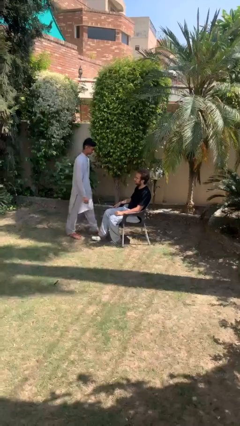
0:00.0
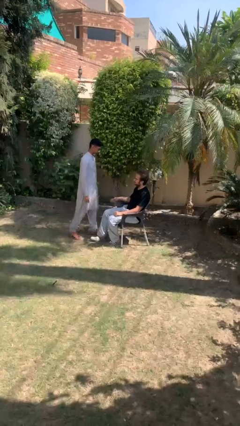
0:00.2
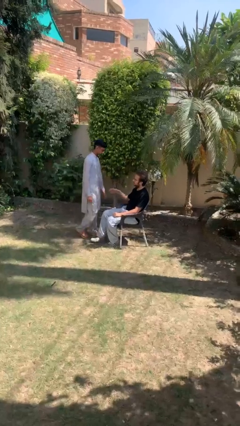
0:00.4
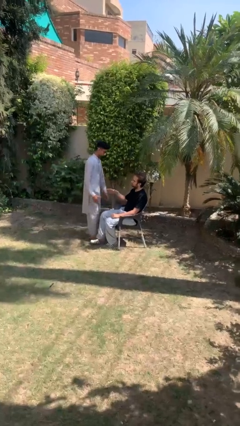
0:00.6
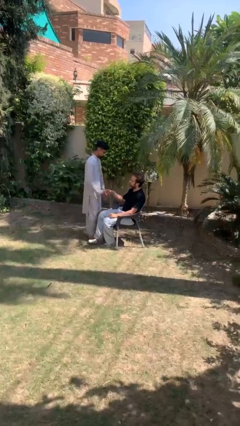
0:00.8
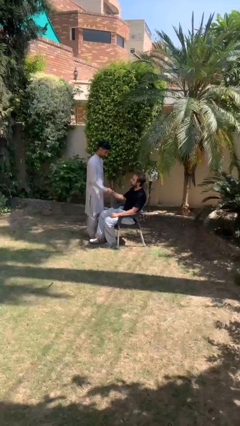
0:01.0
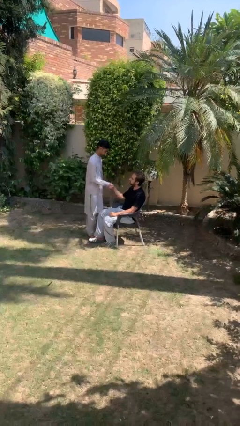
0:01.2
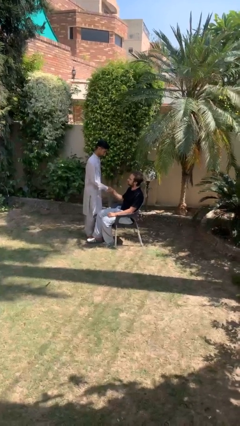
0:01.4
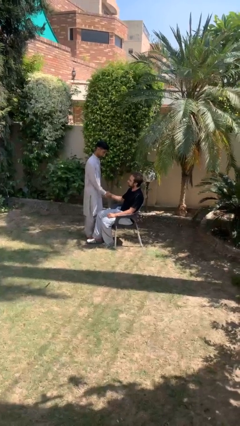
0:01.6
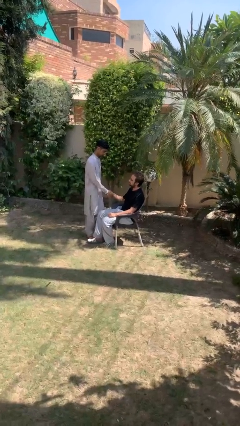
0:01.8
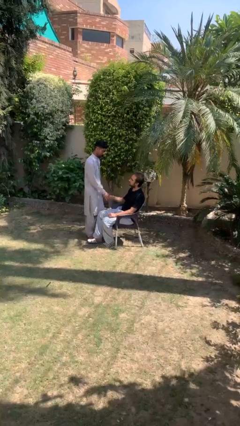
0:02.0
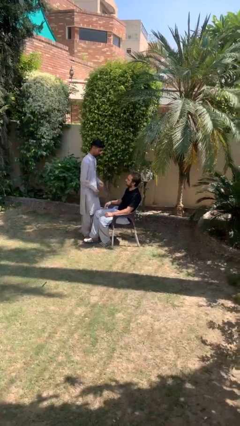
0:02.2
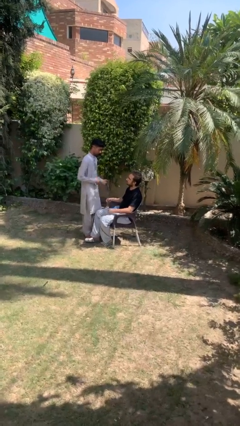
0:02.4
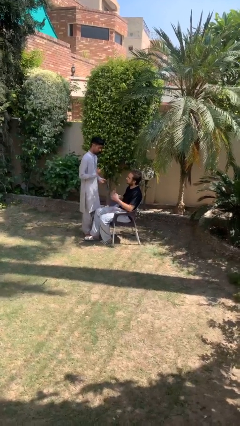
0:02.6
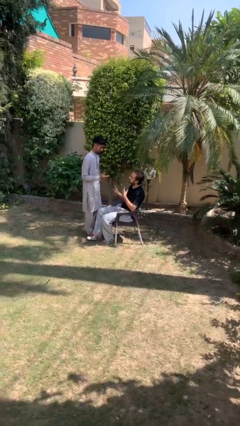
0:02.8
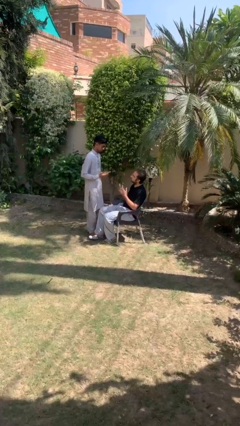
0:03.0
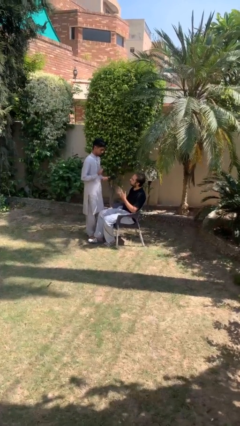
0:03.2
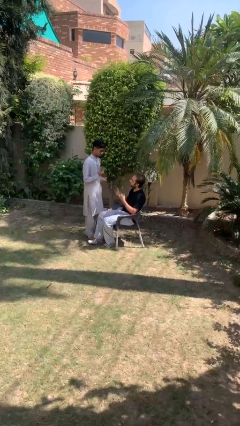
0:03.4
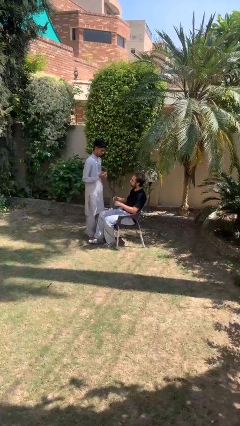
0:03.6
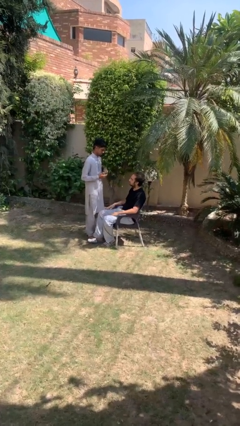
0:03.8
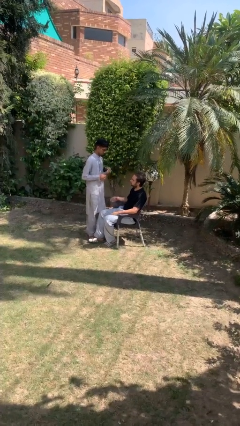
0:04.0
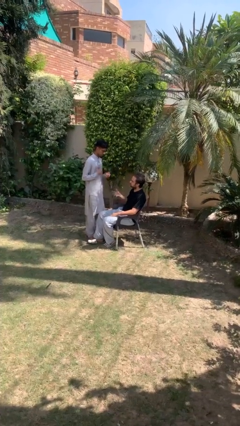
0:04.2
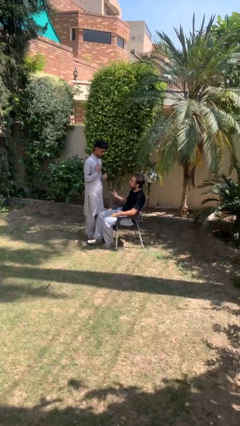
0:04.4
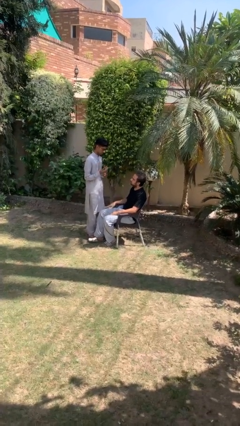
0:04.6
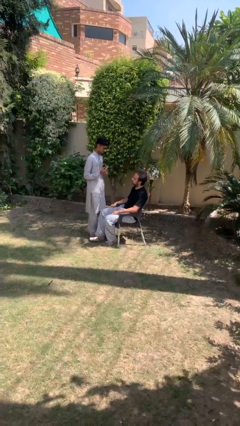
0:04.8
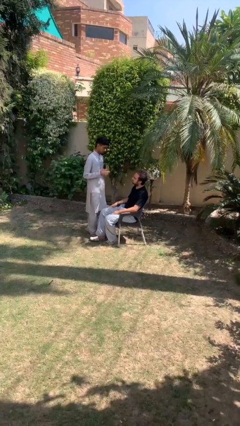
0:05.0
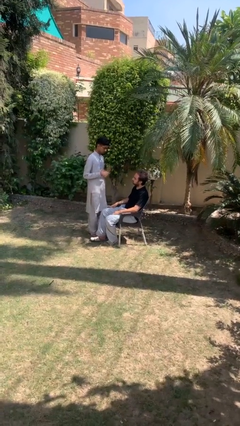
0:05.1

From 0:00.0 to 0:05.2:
person shakes hand

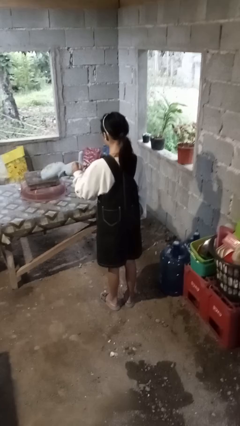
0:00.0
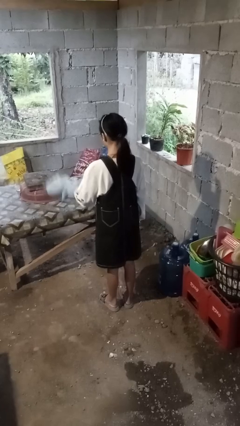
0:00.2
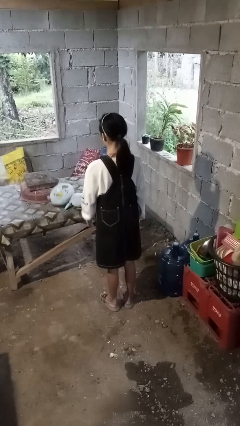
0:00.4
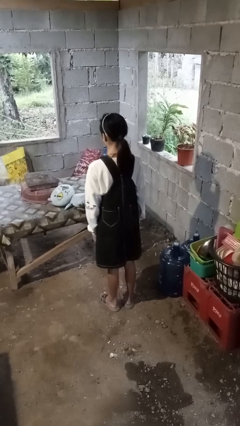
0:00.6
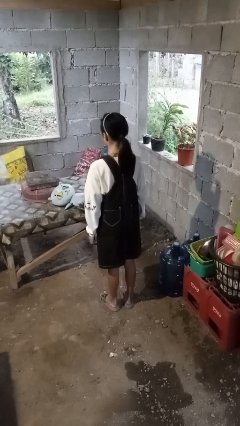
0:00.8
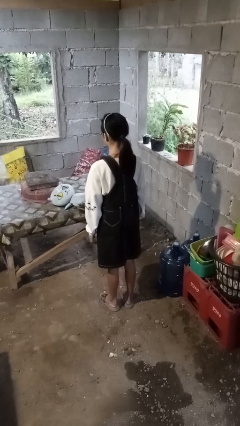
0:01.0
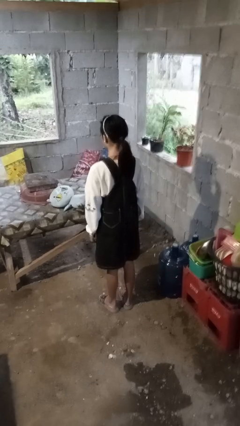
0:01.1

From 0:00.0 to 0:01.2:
person throws object on table

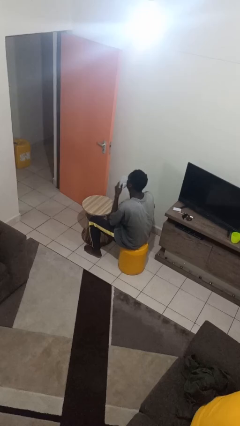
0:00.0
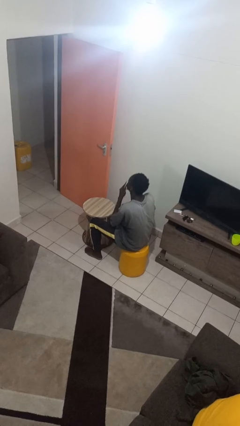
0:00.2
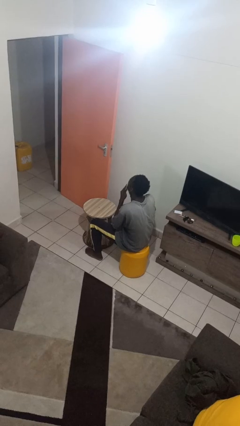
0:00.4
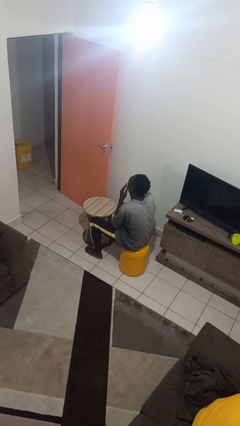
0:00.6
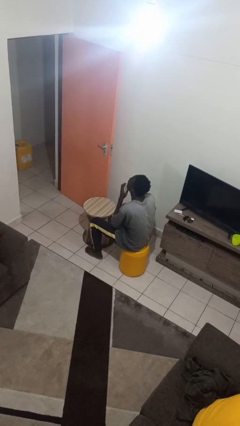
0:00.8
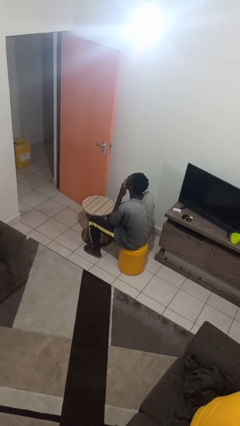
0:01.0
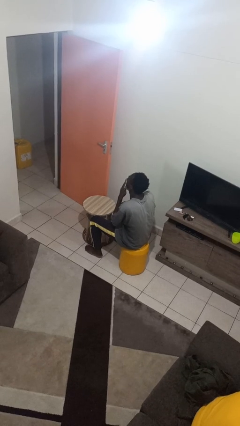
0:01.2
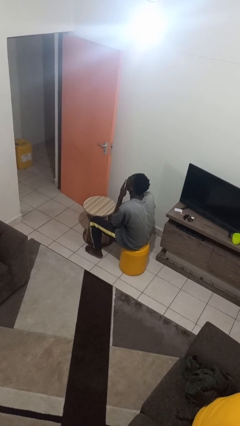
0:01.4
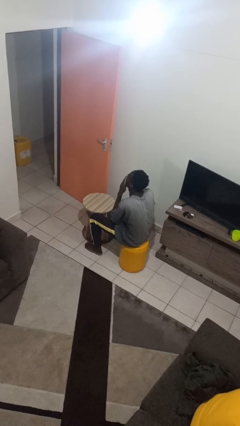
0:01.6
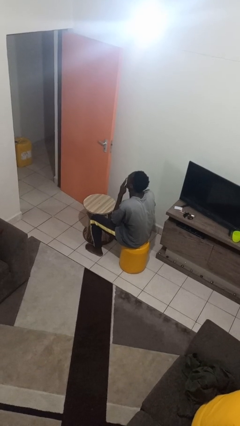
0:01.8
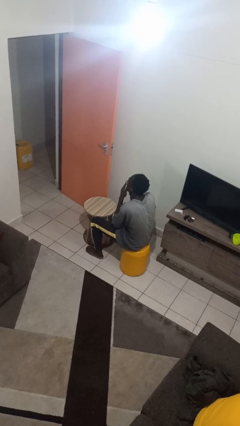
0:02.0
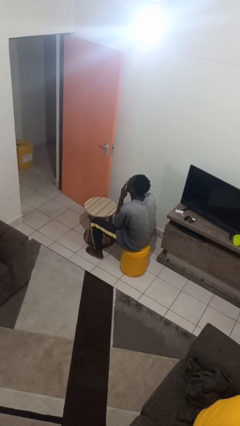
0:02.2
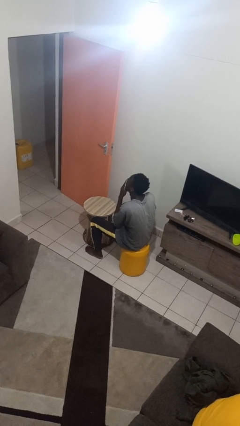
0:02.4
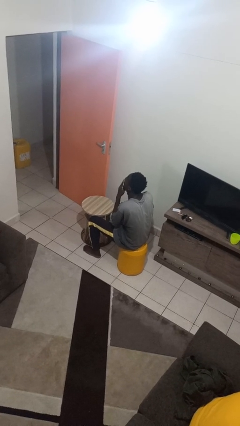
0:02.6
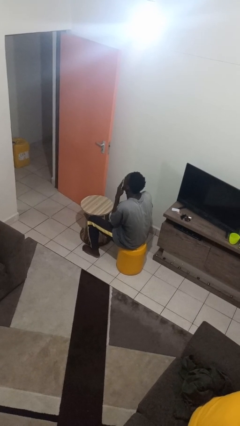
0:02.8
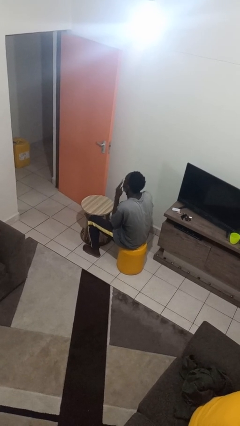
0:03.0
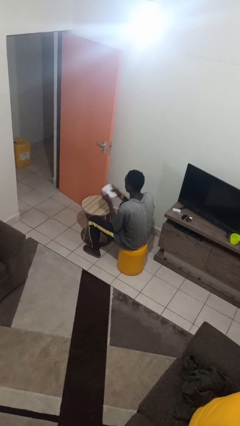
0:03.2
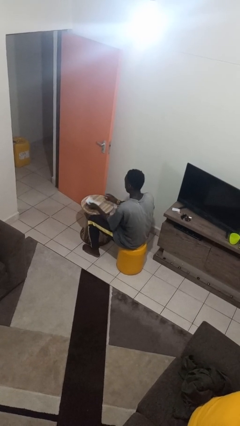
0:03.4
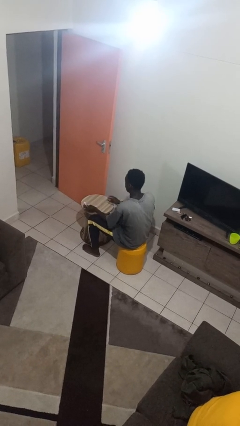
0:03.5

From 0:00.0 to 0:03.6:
person wipes mouth with napkin

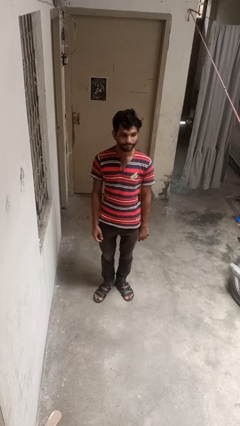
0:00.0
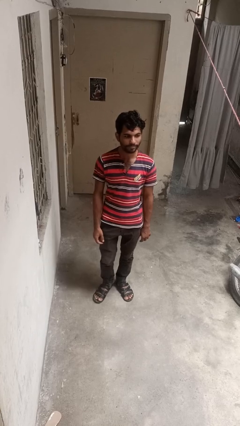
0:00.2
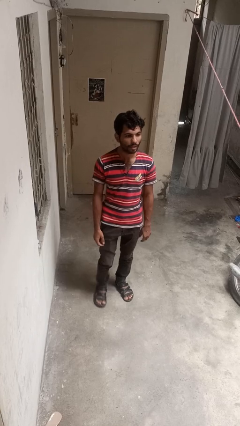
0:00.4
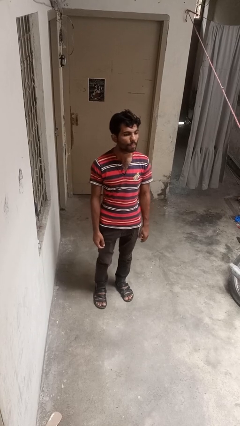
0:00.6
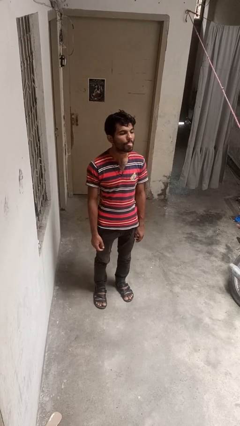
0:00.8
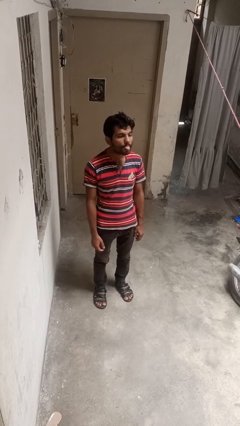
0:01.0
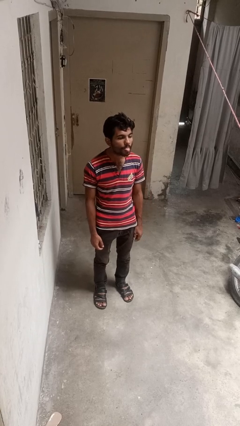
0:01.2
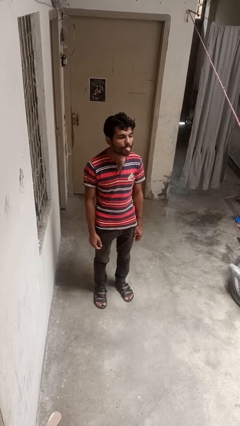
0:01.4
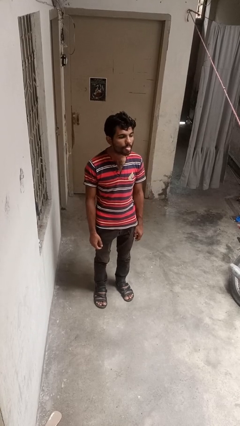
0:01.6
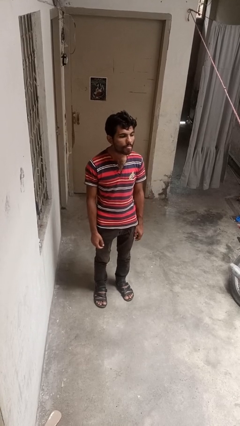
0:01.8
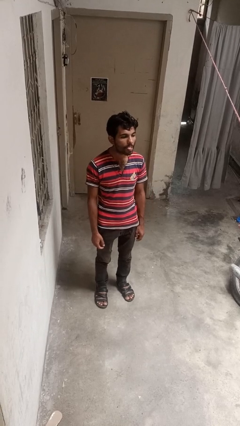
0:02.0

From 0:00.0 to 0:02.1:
person sticks out tongue

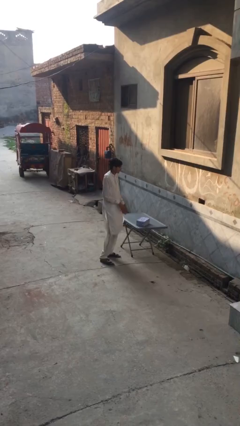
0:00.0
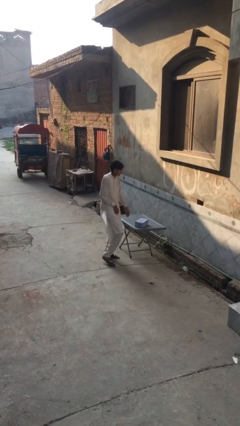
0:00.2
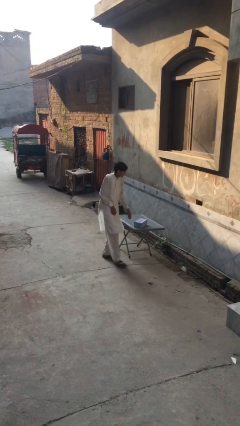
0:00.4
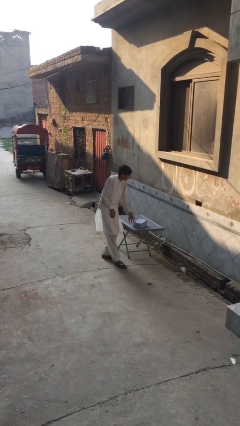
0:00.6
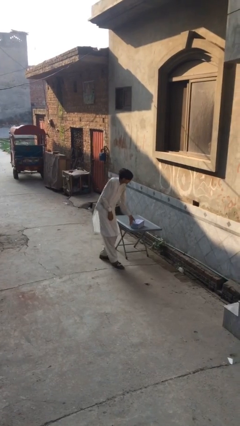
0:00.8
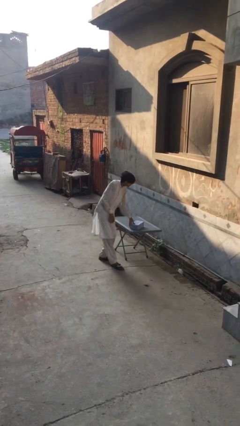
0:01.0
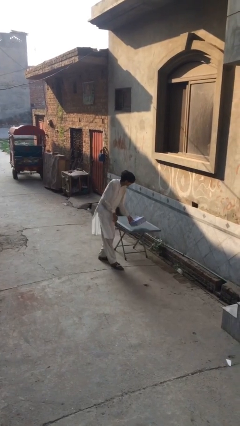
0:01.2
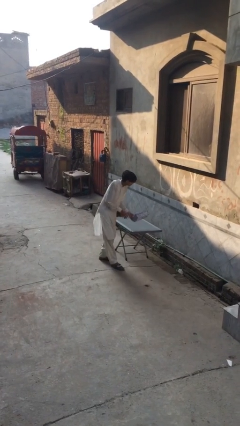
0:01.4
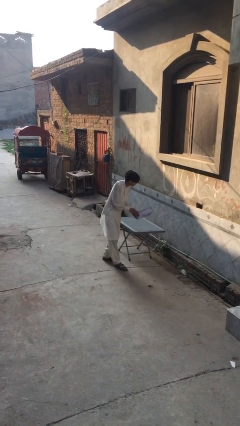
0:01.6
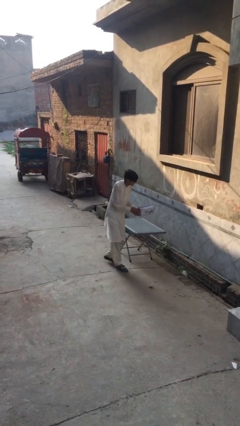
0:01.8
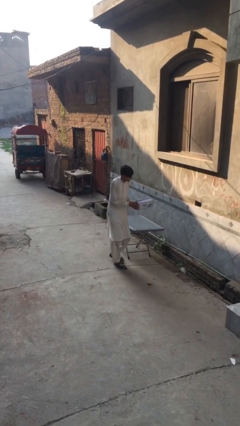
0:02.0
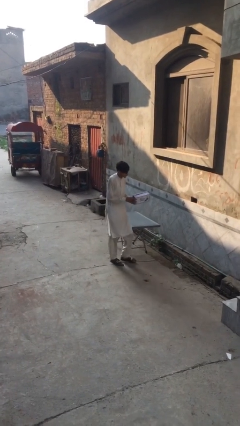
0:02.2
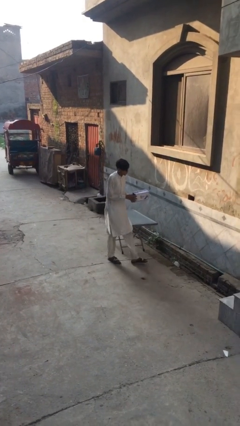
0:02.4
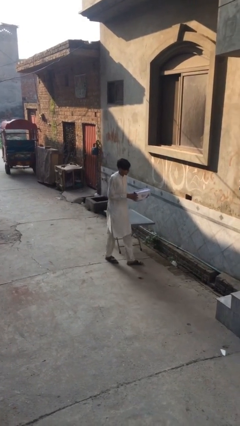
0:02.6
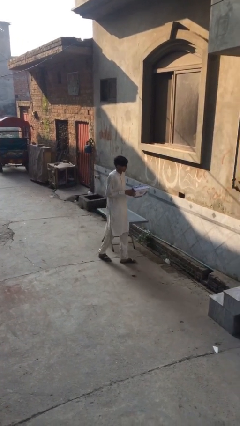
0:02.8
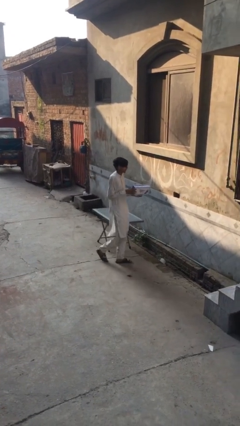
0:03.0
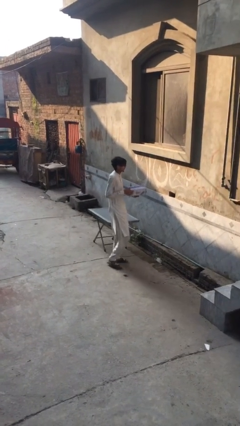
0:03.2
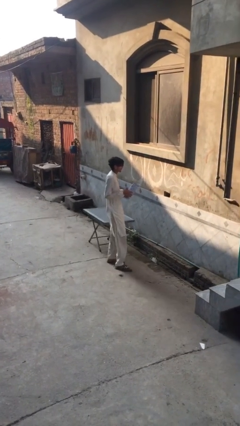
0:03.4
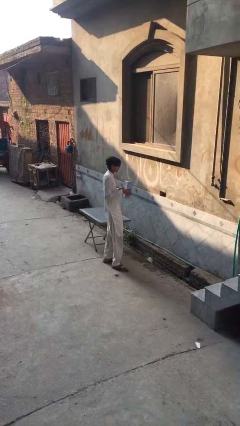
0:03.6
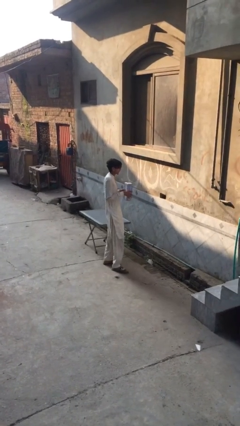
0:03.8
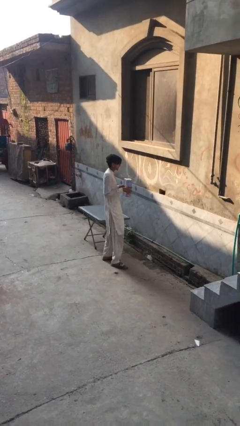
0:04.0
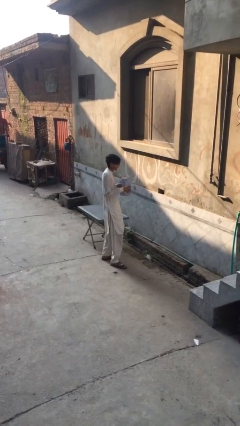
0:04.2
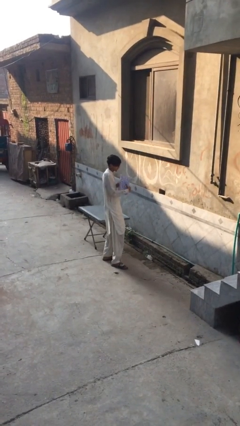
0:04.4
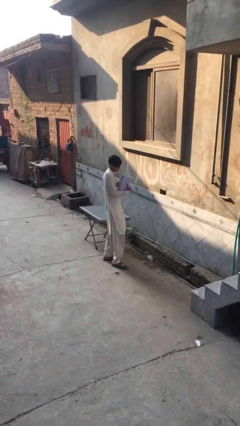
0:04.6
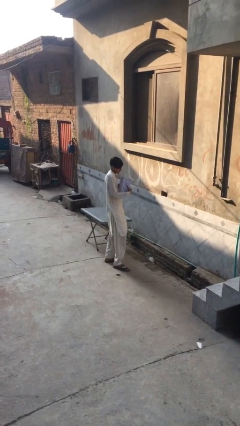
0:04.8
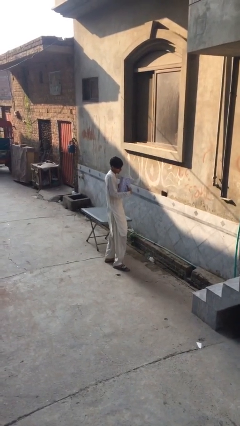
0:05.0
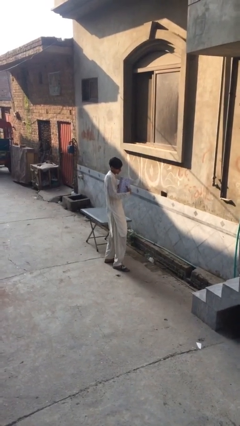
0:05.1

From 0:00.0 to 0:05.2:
person picks up object from table
